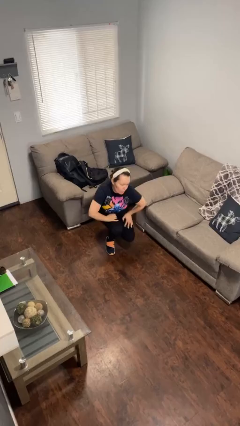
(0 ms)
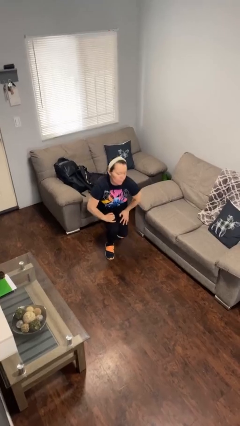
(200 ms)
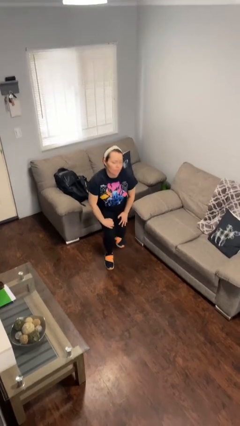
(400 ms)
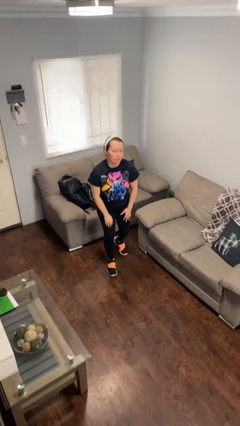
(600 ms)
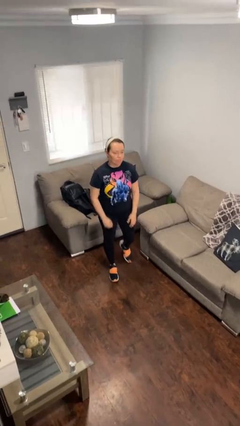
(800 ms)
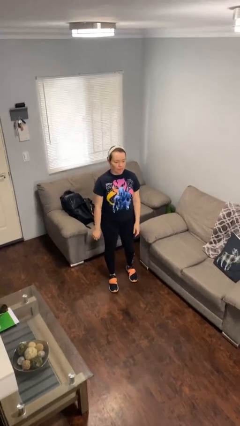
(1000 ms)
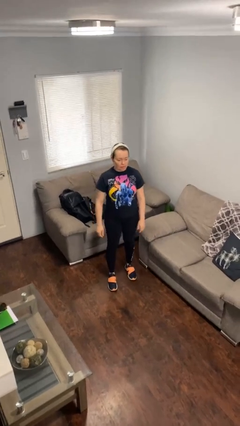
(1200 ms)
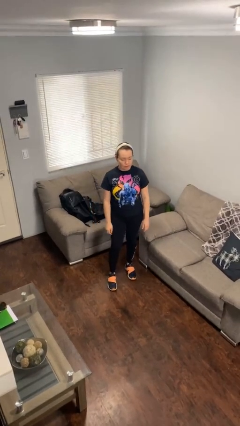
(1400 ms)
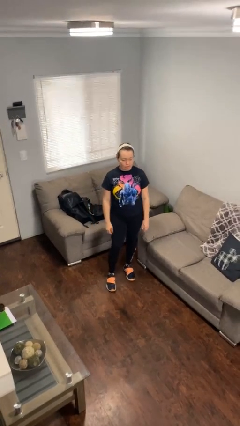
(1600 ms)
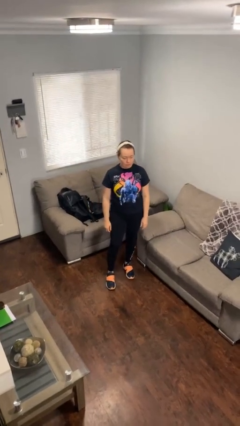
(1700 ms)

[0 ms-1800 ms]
person stands up from floor

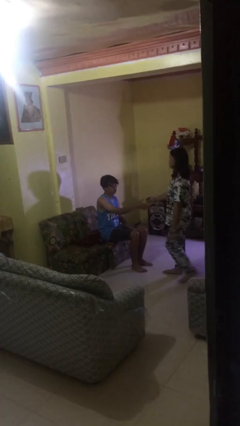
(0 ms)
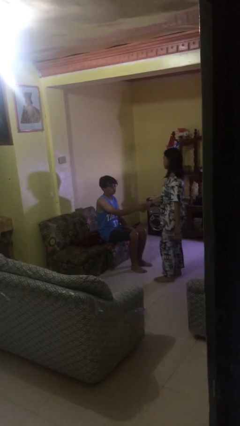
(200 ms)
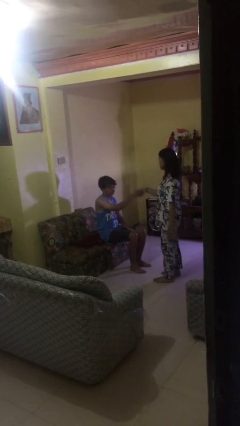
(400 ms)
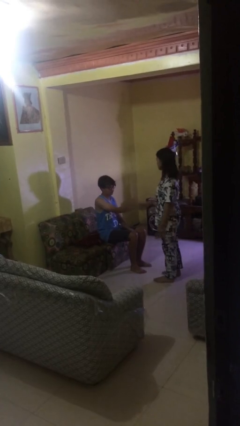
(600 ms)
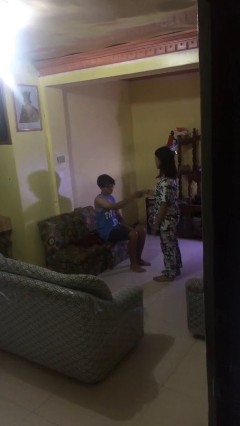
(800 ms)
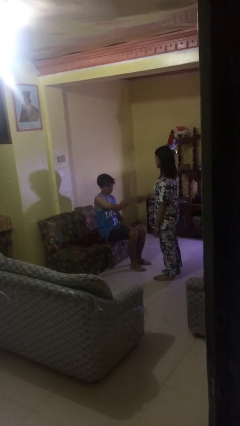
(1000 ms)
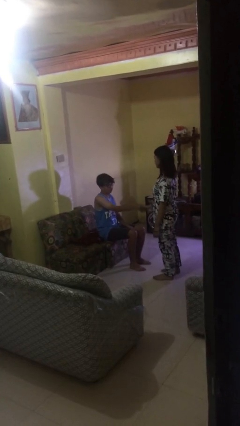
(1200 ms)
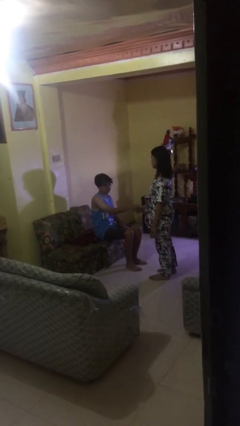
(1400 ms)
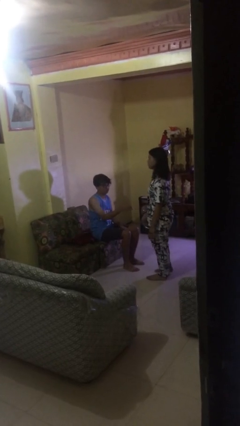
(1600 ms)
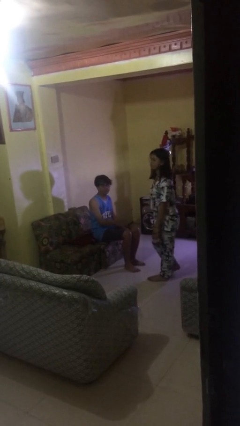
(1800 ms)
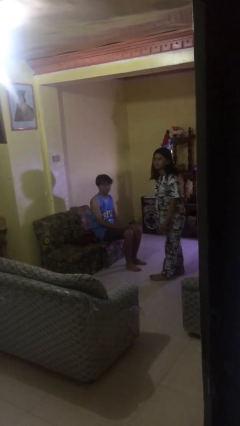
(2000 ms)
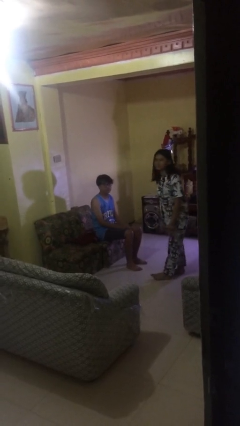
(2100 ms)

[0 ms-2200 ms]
person shakes hand

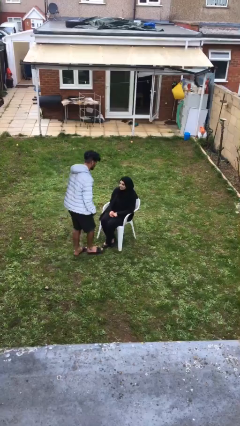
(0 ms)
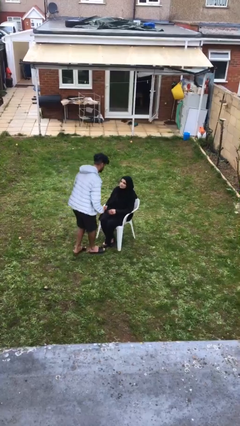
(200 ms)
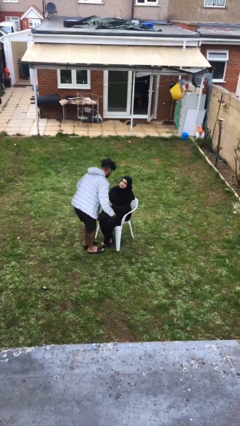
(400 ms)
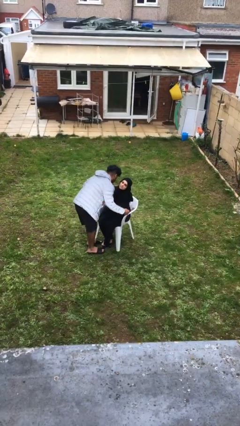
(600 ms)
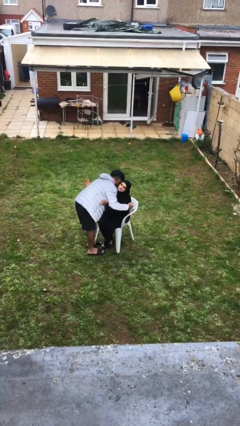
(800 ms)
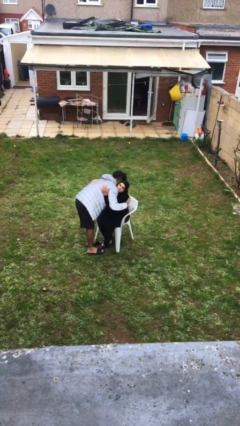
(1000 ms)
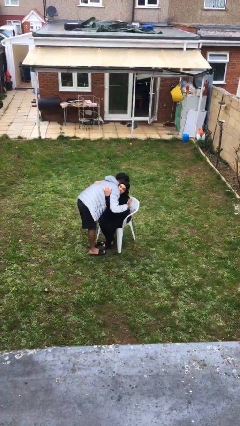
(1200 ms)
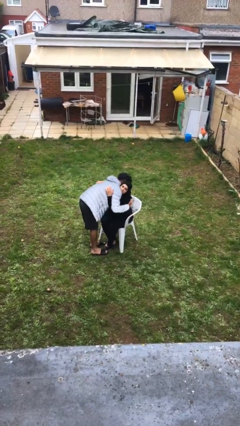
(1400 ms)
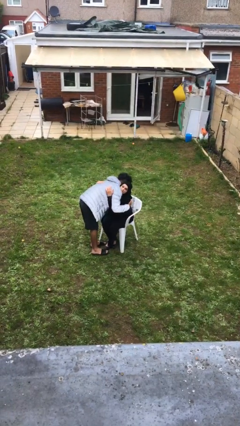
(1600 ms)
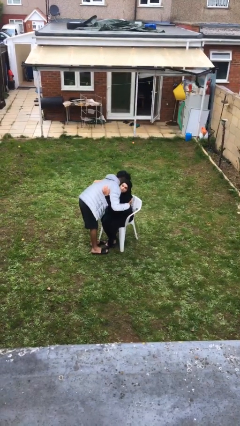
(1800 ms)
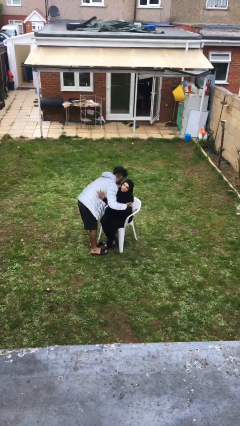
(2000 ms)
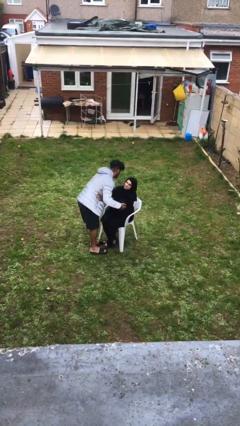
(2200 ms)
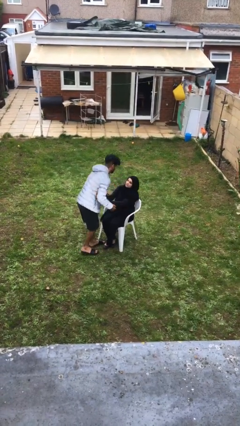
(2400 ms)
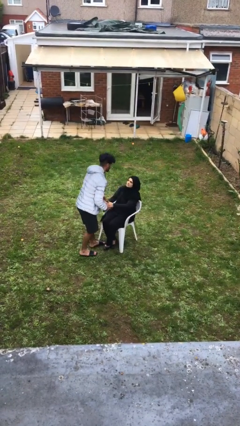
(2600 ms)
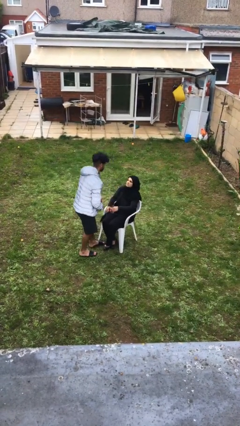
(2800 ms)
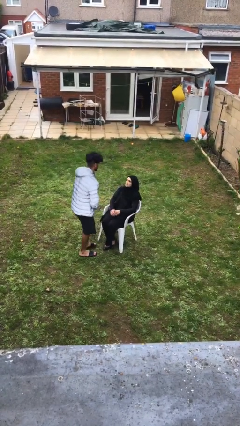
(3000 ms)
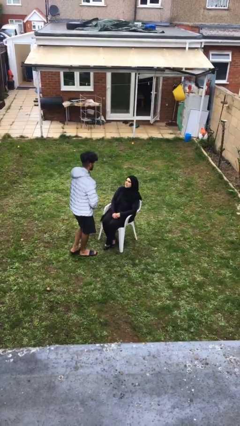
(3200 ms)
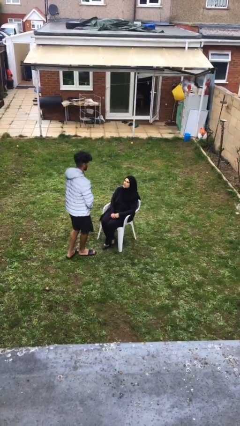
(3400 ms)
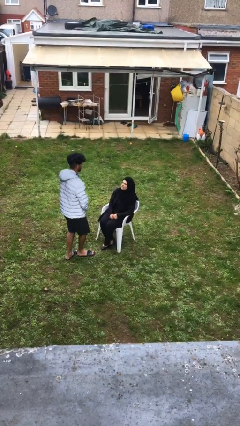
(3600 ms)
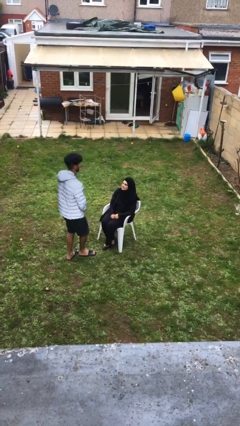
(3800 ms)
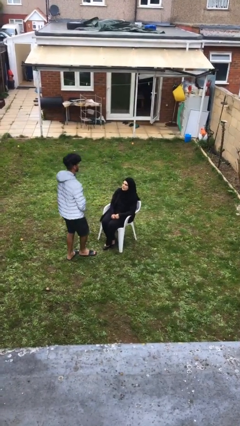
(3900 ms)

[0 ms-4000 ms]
person embraces person

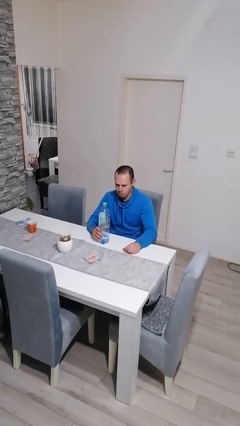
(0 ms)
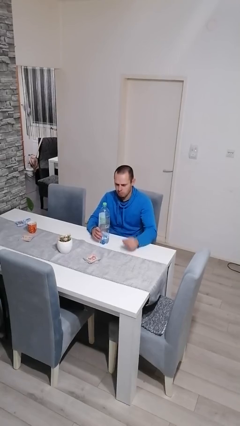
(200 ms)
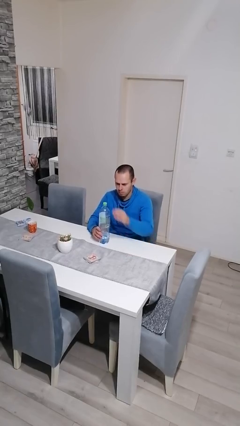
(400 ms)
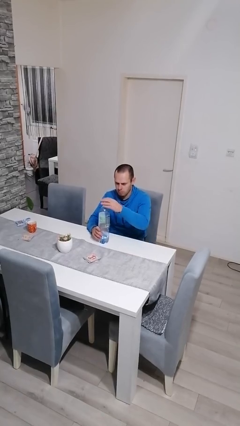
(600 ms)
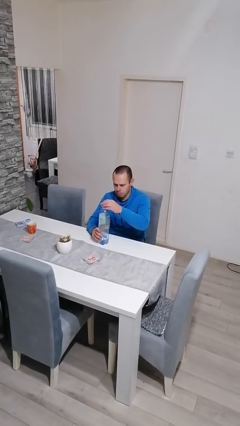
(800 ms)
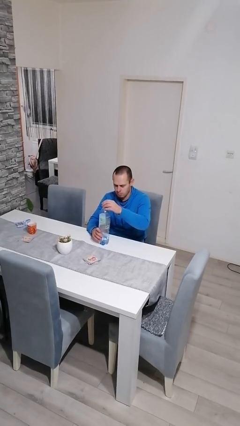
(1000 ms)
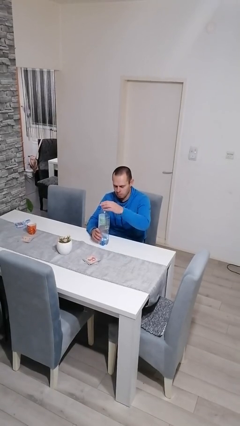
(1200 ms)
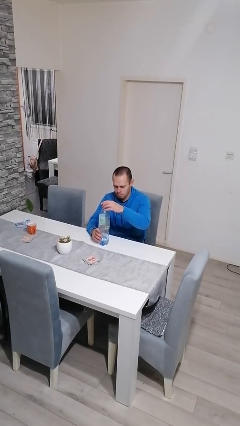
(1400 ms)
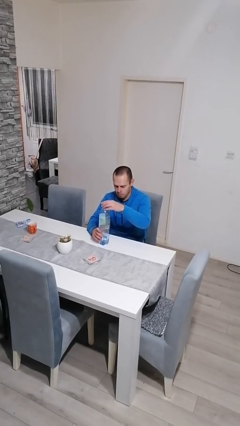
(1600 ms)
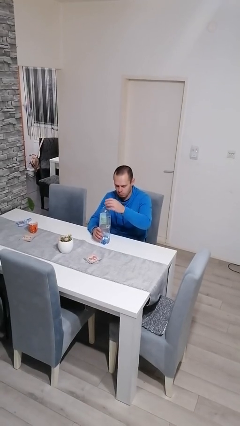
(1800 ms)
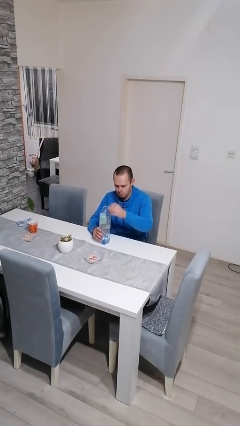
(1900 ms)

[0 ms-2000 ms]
person unscrews lid from bottle

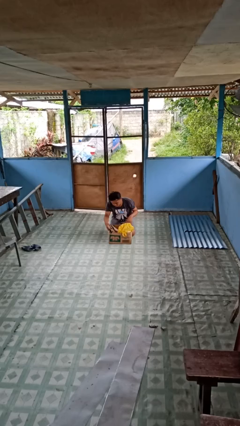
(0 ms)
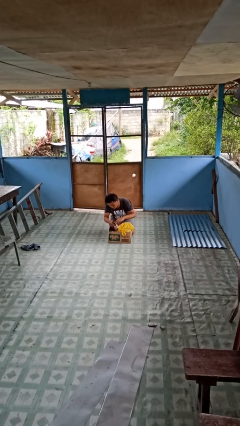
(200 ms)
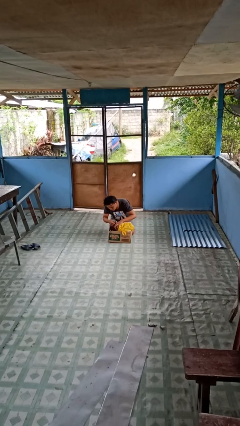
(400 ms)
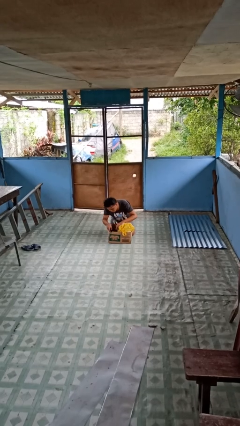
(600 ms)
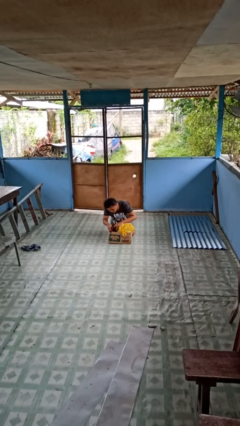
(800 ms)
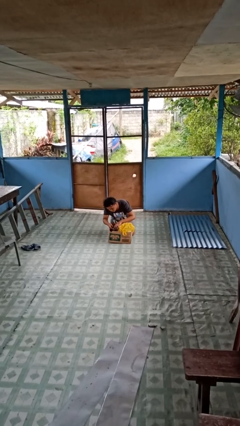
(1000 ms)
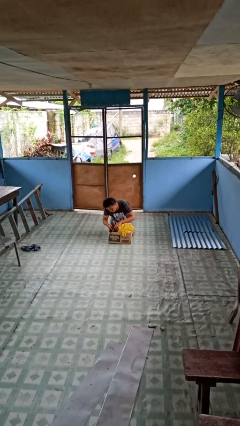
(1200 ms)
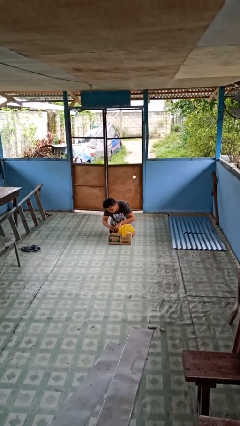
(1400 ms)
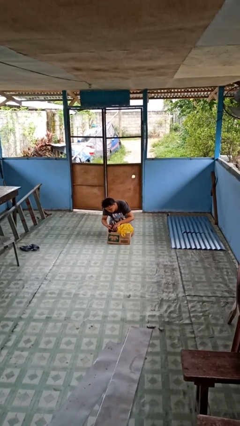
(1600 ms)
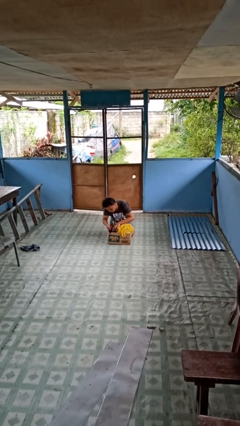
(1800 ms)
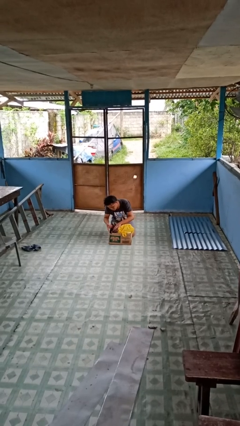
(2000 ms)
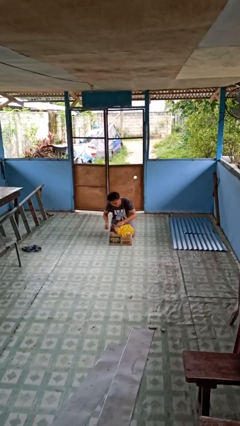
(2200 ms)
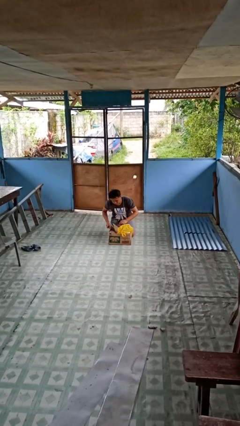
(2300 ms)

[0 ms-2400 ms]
person searches in box

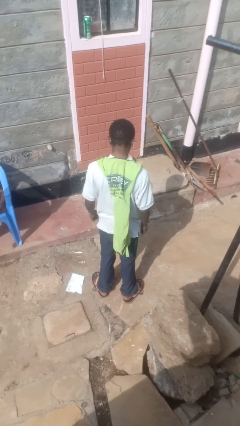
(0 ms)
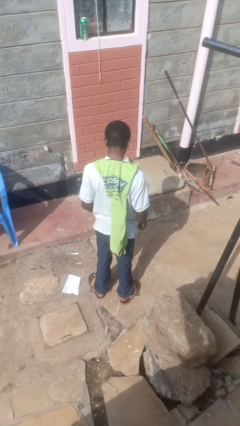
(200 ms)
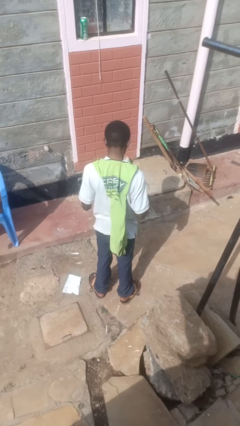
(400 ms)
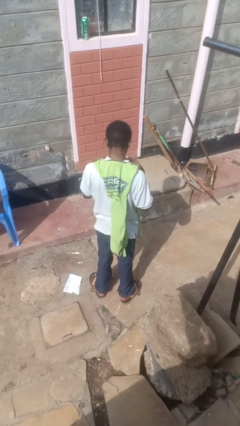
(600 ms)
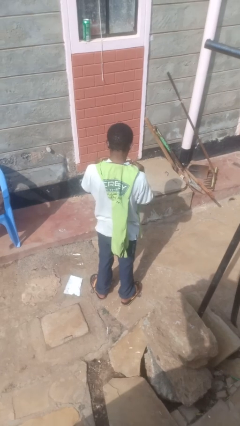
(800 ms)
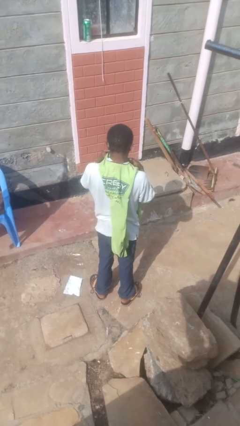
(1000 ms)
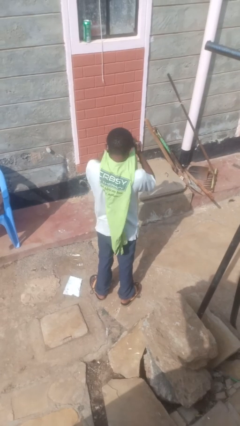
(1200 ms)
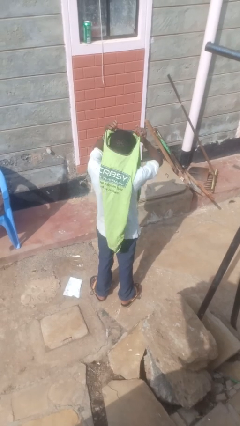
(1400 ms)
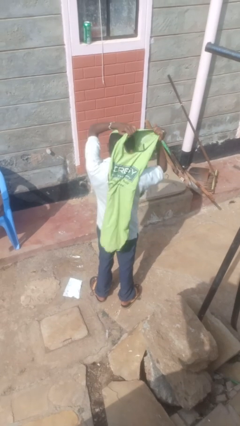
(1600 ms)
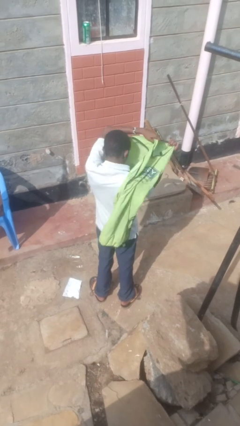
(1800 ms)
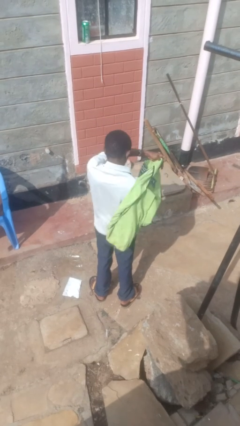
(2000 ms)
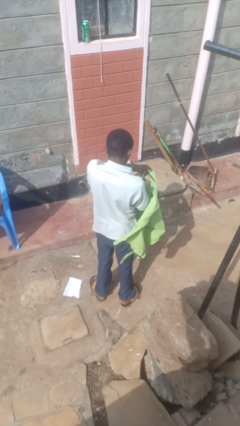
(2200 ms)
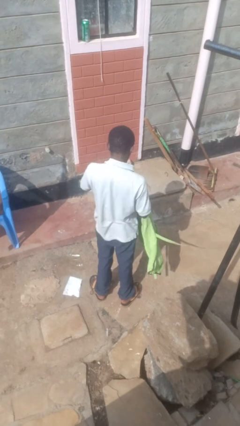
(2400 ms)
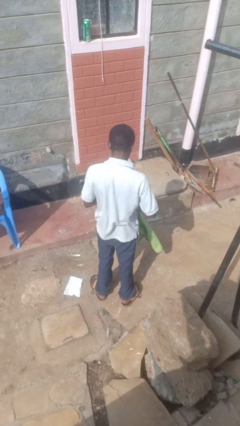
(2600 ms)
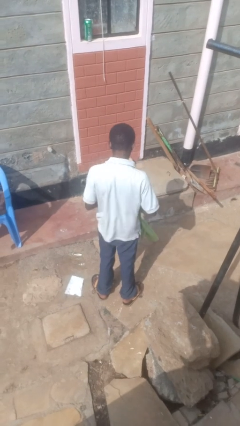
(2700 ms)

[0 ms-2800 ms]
person takes off apron

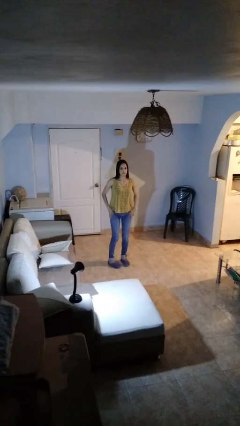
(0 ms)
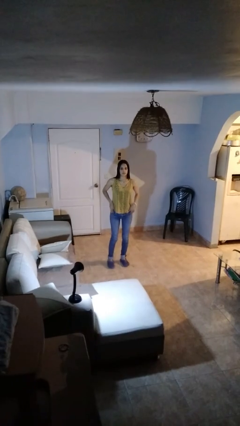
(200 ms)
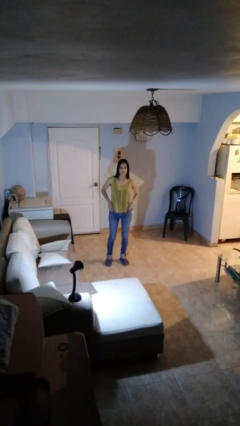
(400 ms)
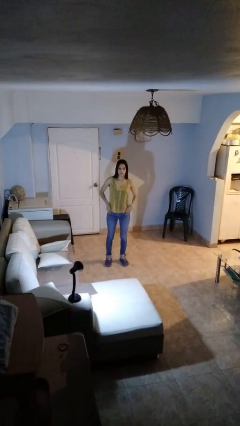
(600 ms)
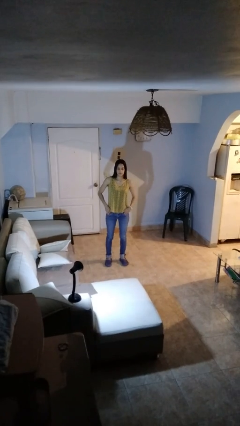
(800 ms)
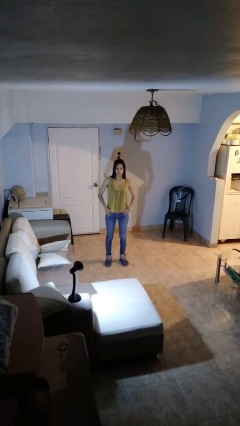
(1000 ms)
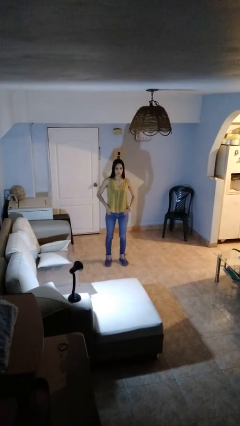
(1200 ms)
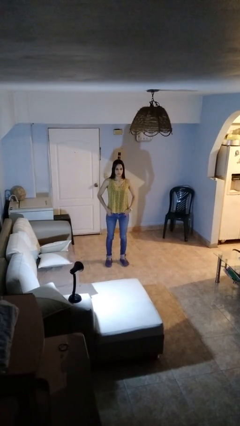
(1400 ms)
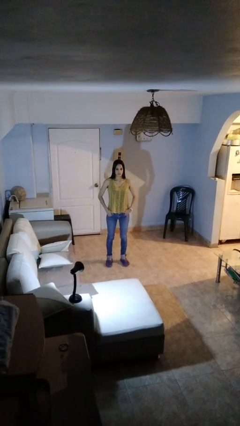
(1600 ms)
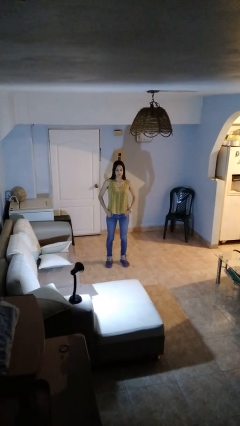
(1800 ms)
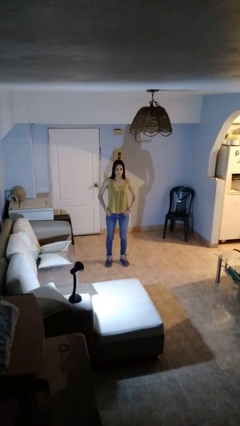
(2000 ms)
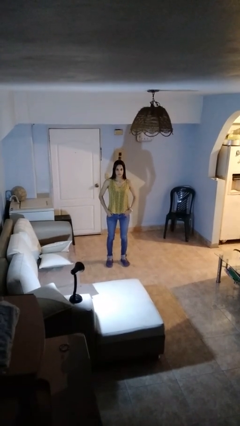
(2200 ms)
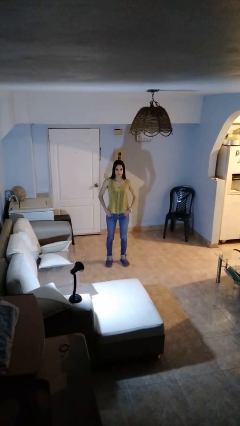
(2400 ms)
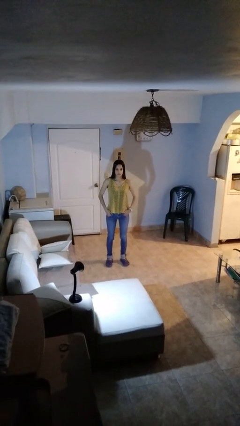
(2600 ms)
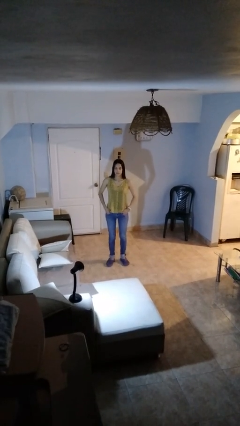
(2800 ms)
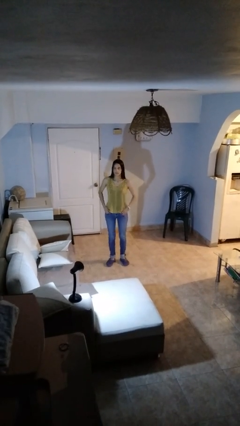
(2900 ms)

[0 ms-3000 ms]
person puts hands in back pockets
